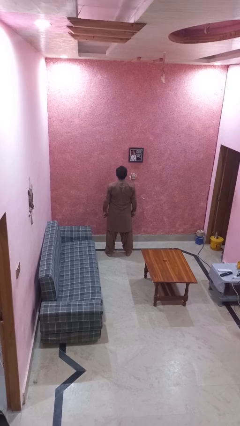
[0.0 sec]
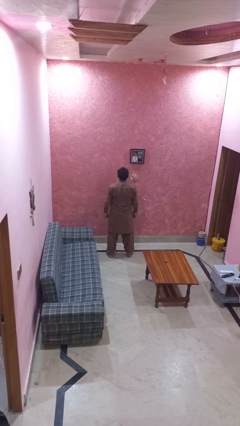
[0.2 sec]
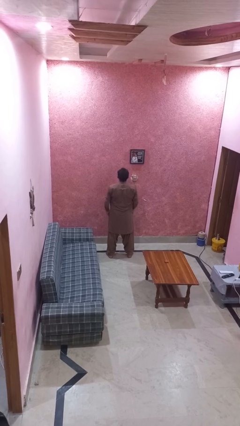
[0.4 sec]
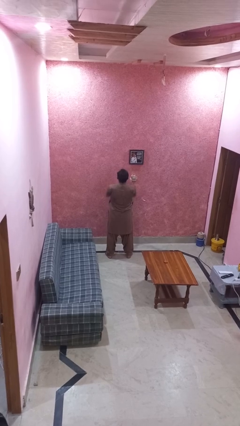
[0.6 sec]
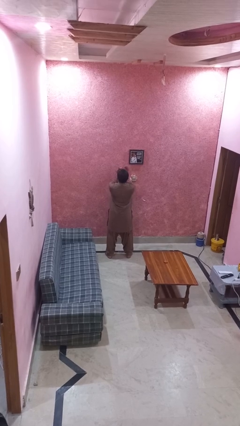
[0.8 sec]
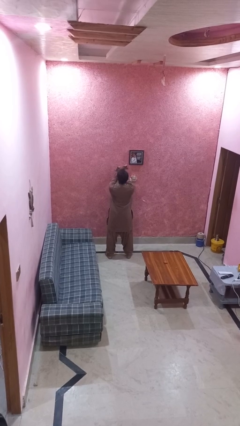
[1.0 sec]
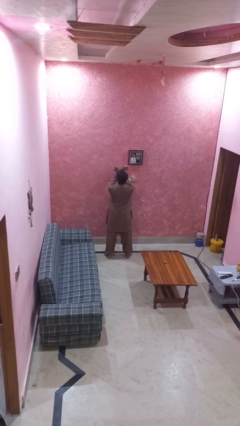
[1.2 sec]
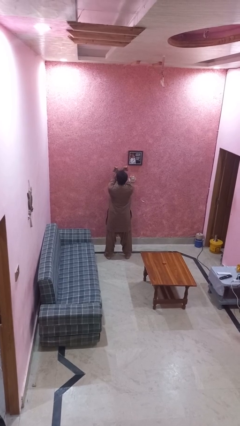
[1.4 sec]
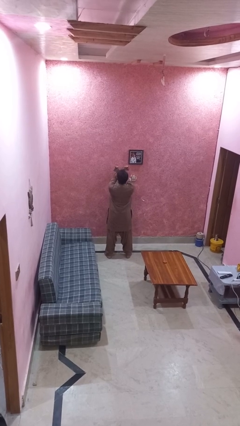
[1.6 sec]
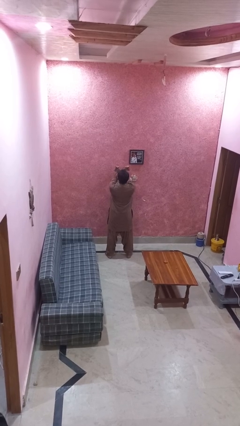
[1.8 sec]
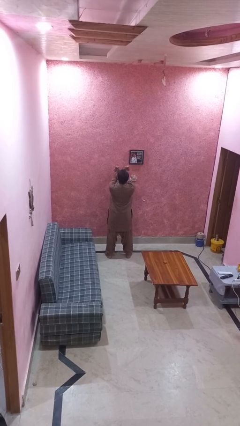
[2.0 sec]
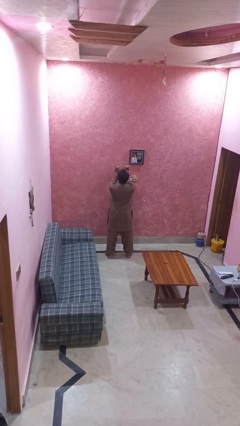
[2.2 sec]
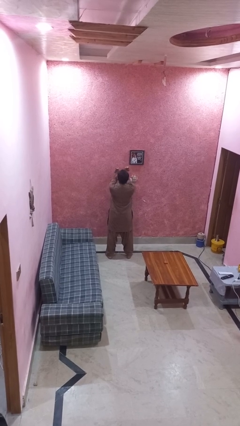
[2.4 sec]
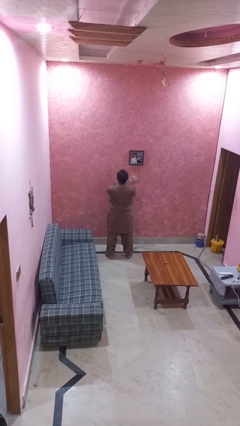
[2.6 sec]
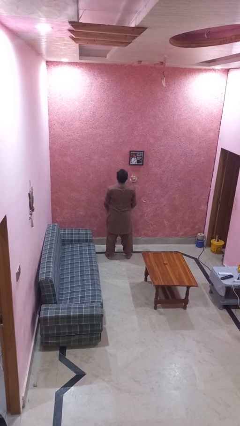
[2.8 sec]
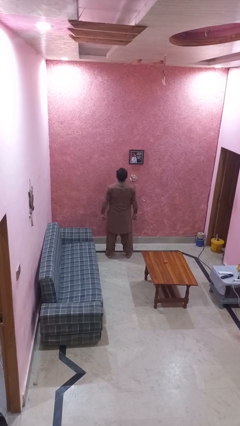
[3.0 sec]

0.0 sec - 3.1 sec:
person gestures arms x

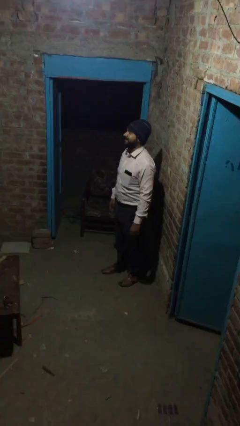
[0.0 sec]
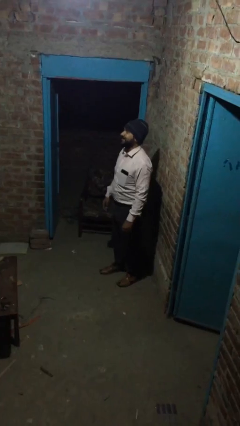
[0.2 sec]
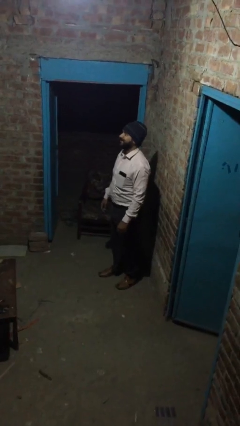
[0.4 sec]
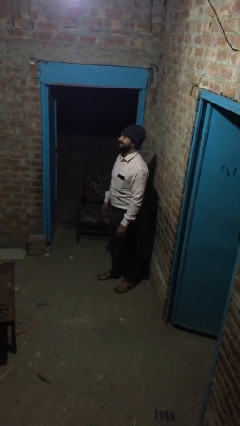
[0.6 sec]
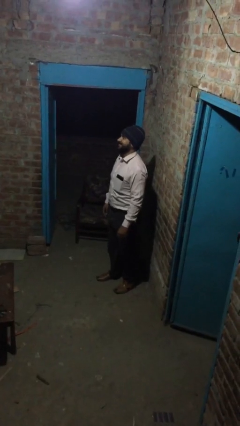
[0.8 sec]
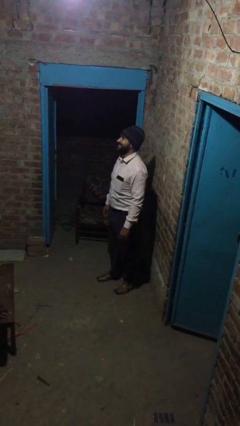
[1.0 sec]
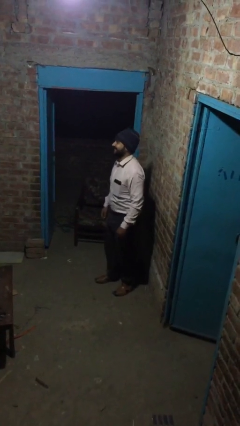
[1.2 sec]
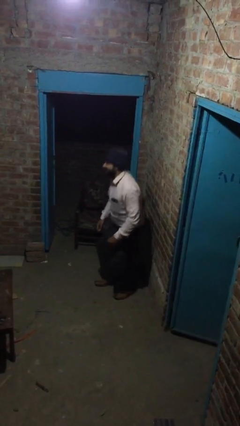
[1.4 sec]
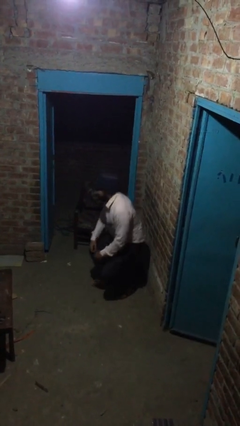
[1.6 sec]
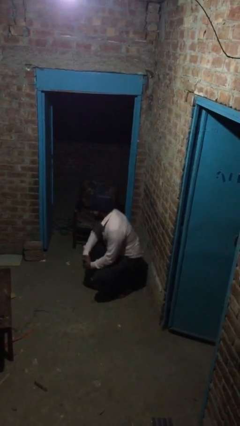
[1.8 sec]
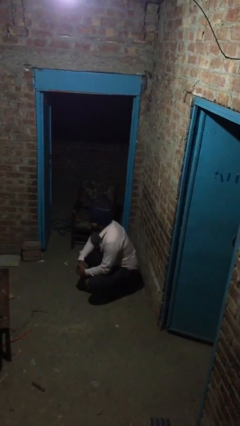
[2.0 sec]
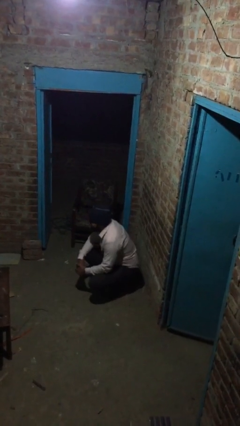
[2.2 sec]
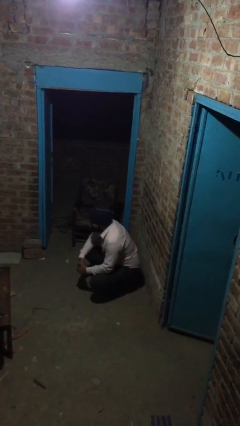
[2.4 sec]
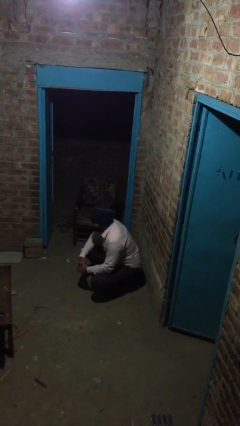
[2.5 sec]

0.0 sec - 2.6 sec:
person sits down

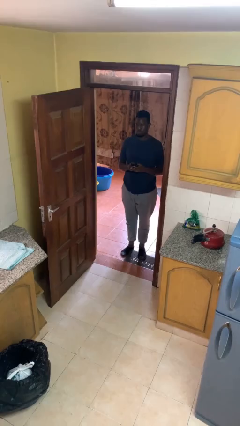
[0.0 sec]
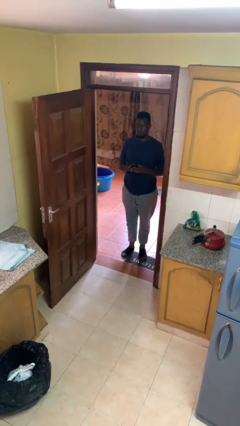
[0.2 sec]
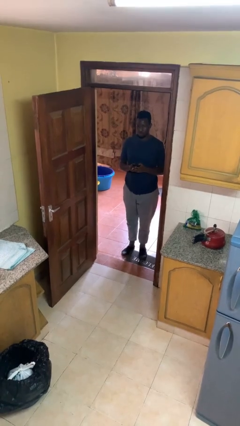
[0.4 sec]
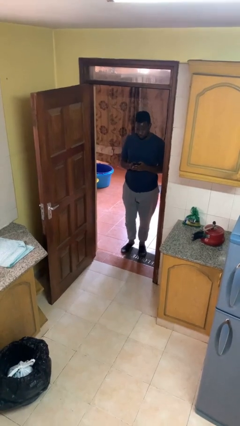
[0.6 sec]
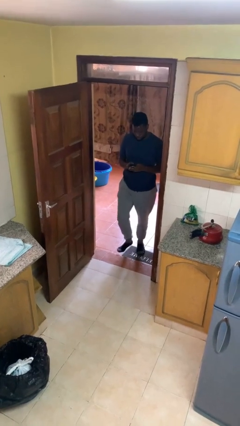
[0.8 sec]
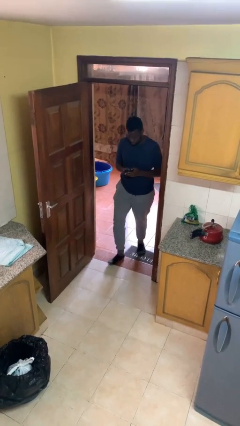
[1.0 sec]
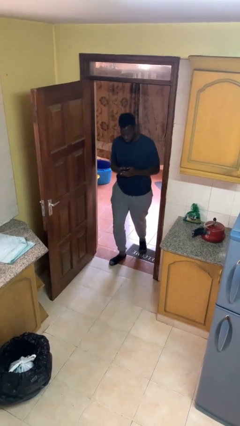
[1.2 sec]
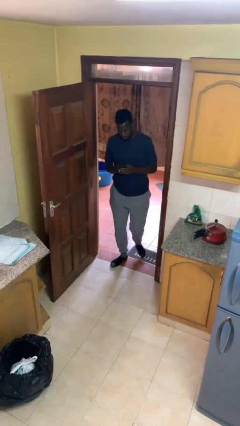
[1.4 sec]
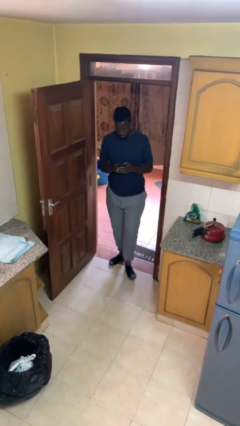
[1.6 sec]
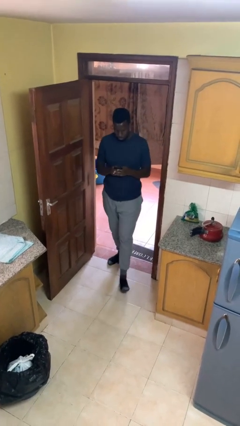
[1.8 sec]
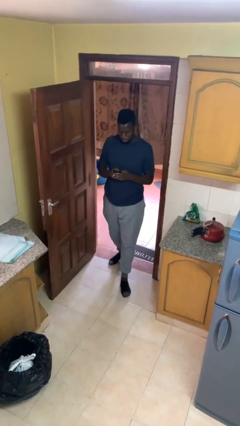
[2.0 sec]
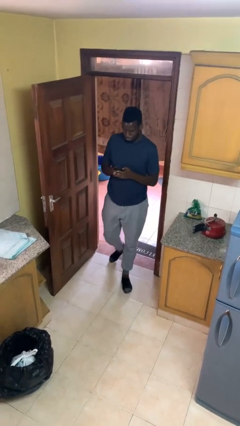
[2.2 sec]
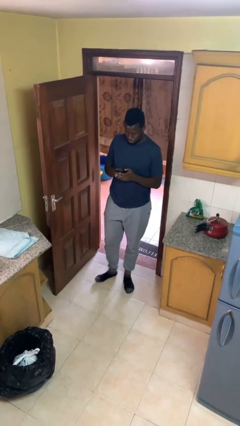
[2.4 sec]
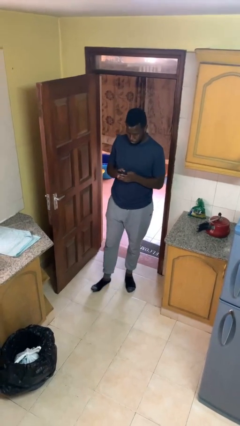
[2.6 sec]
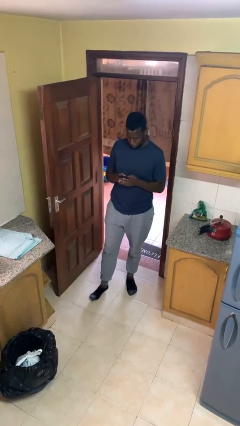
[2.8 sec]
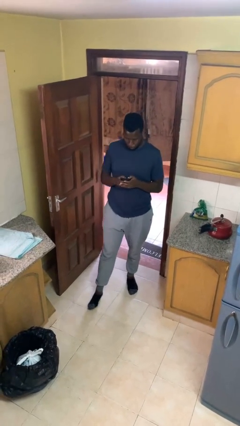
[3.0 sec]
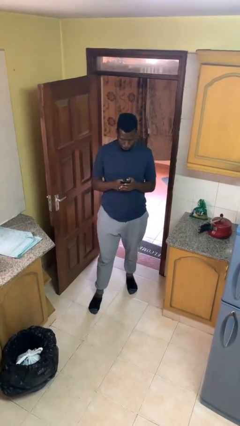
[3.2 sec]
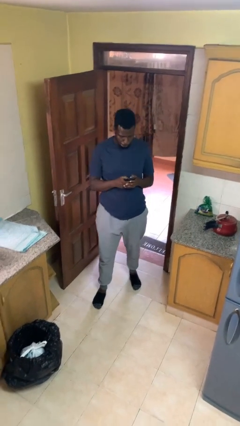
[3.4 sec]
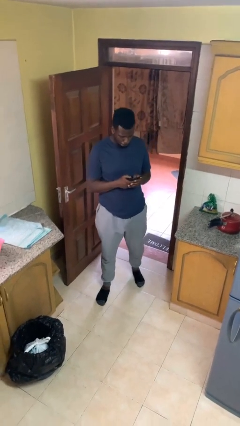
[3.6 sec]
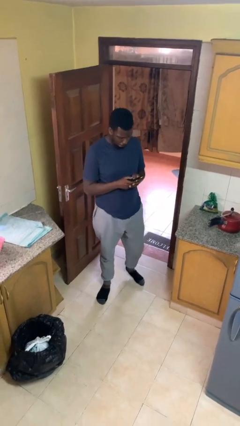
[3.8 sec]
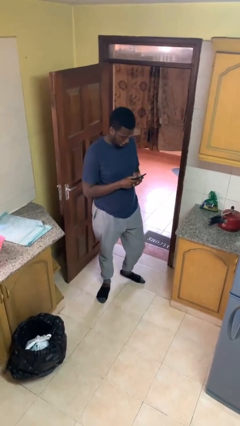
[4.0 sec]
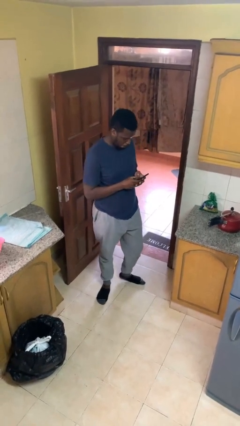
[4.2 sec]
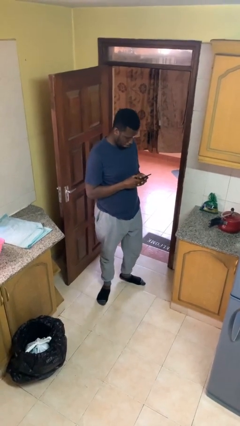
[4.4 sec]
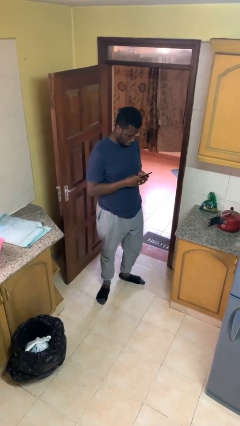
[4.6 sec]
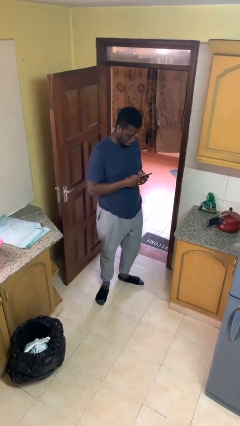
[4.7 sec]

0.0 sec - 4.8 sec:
person enters scene through structure

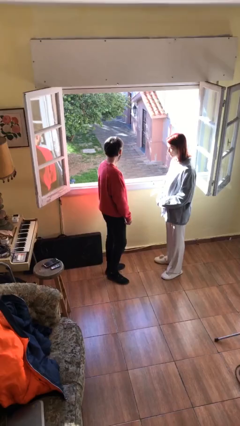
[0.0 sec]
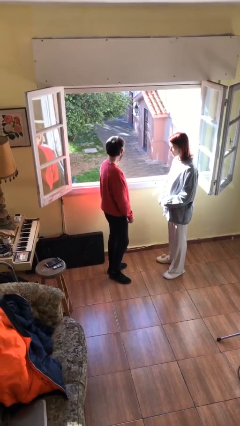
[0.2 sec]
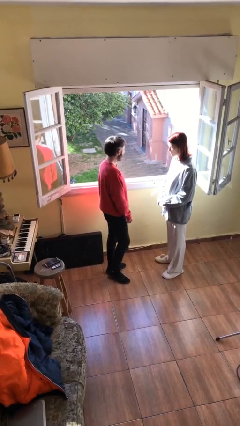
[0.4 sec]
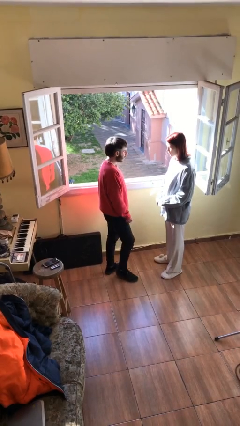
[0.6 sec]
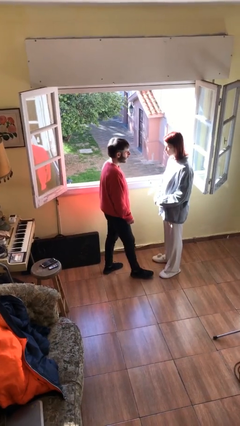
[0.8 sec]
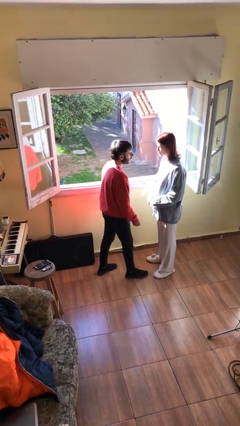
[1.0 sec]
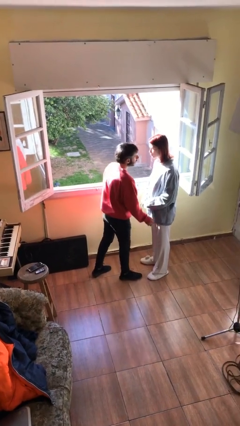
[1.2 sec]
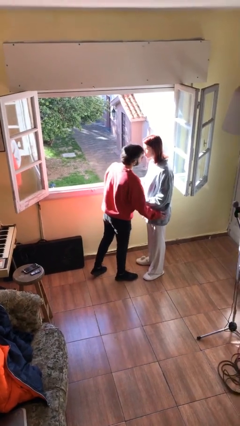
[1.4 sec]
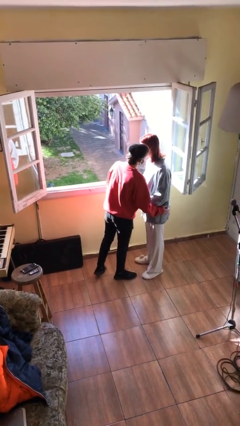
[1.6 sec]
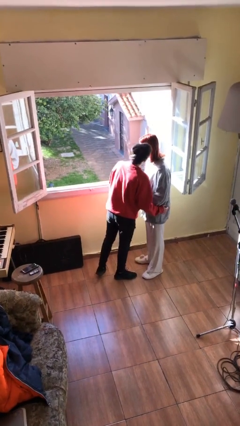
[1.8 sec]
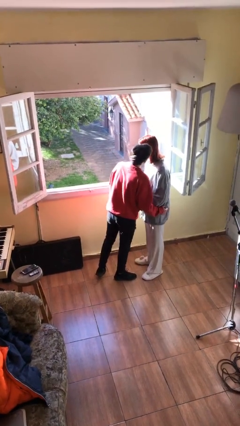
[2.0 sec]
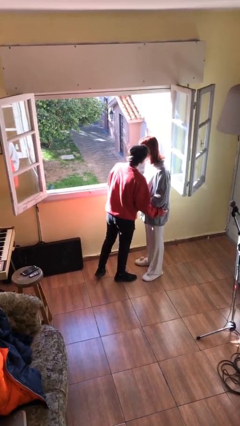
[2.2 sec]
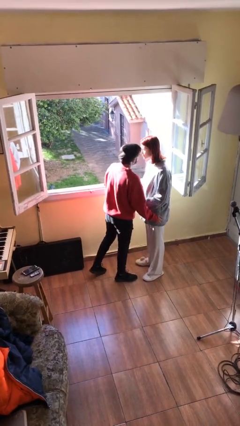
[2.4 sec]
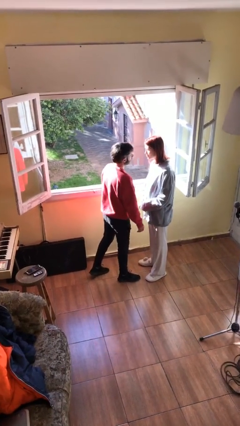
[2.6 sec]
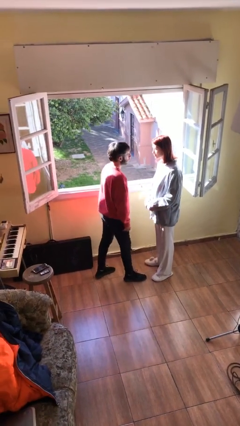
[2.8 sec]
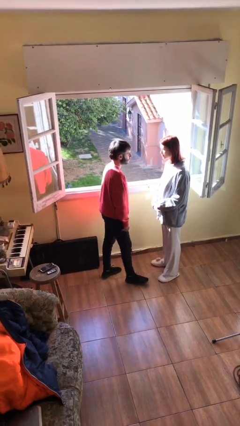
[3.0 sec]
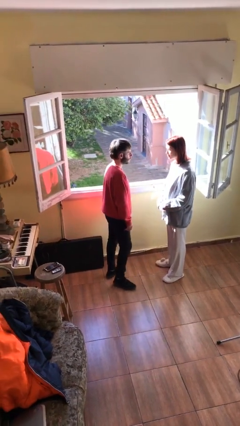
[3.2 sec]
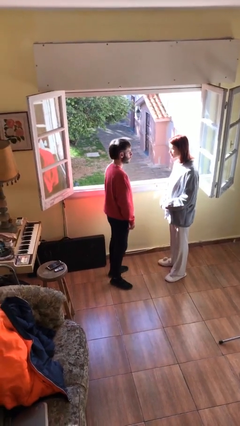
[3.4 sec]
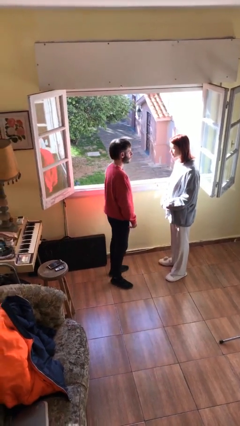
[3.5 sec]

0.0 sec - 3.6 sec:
person kisses cheek of person

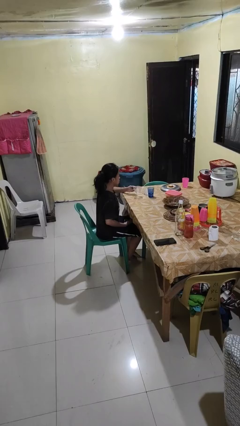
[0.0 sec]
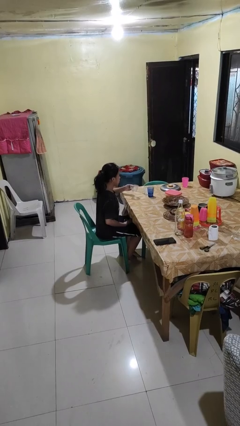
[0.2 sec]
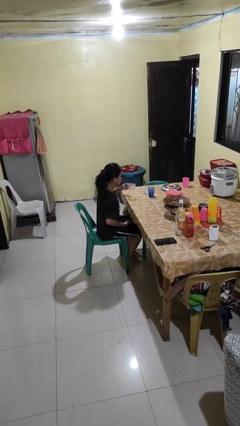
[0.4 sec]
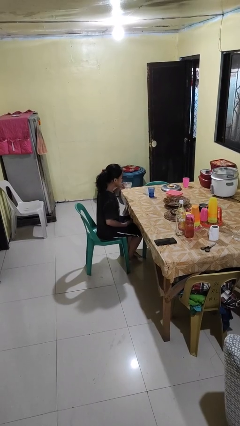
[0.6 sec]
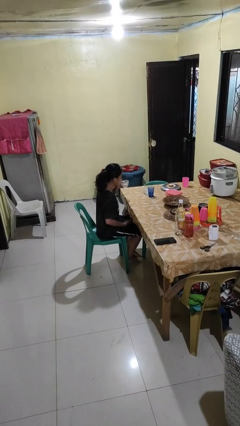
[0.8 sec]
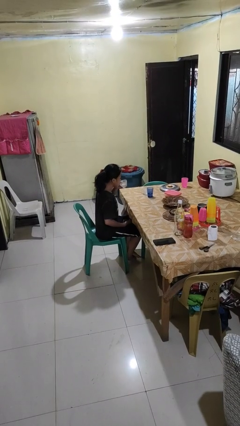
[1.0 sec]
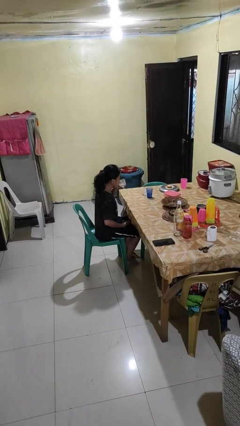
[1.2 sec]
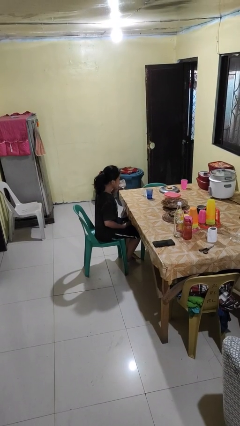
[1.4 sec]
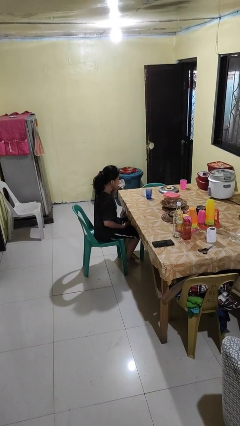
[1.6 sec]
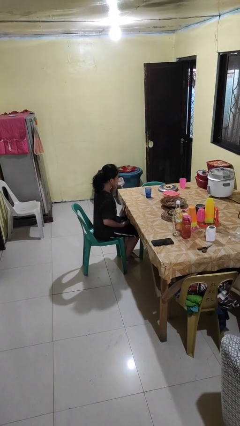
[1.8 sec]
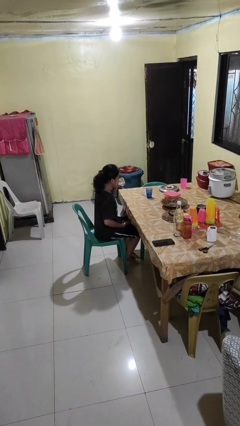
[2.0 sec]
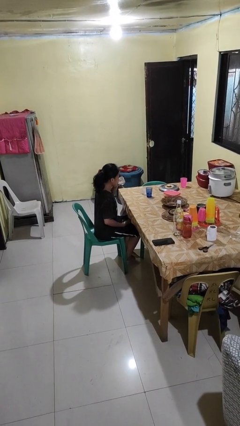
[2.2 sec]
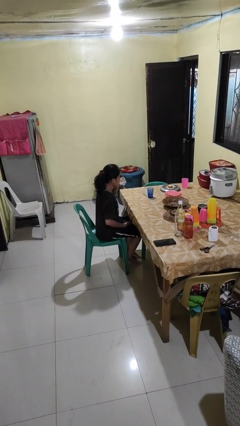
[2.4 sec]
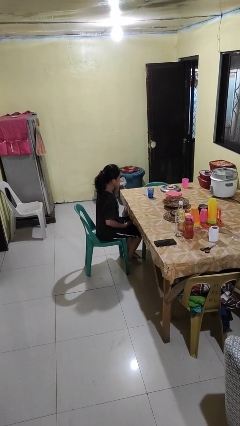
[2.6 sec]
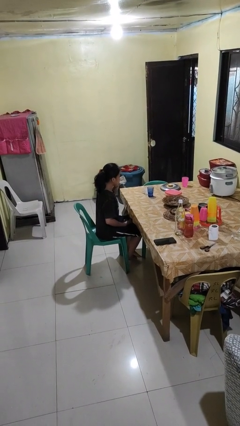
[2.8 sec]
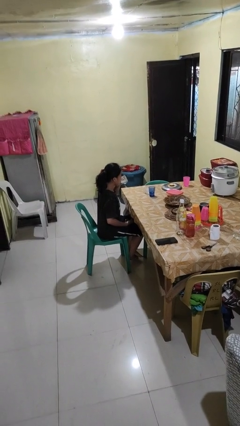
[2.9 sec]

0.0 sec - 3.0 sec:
person drinks from shotglass

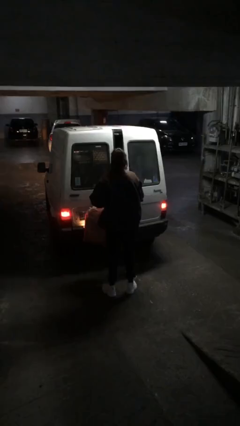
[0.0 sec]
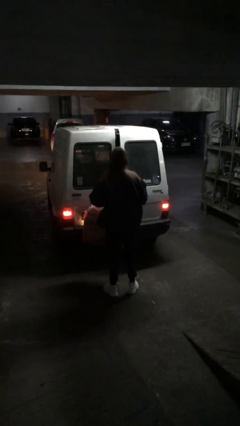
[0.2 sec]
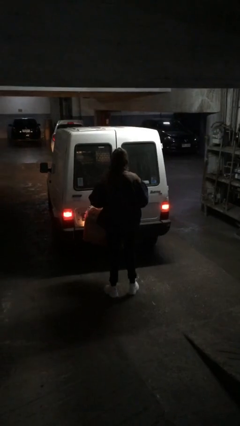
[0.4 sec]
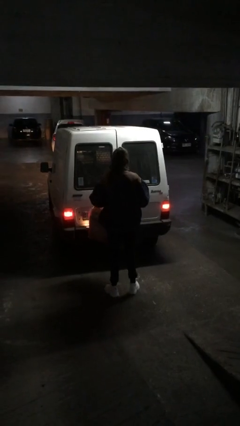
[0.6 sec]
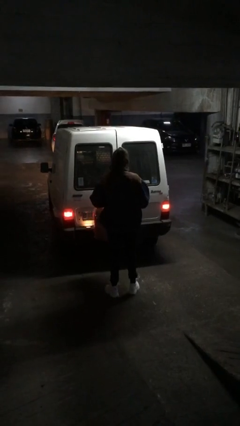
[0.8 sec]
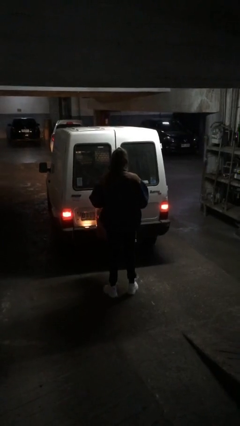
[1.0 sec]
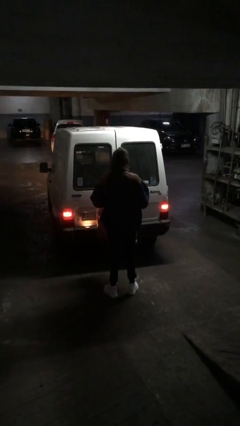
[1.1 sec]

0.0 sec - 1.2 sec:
person closes car door
